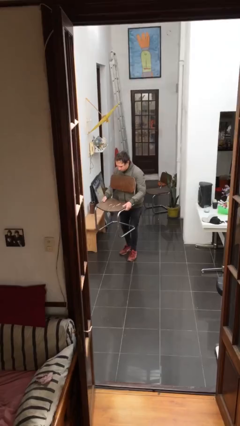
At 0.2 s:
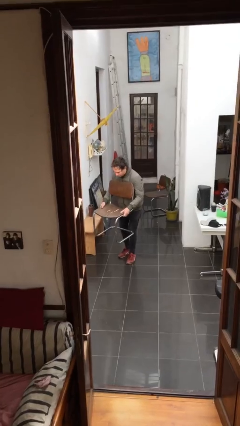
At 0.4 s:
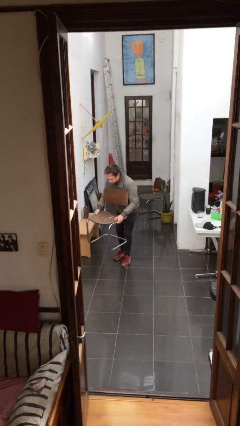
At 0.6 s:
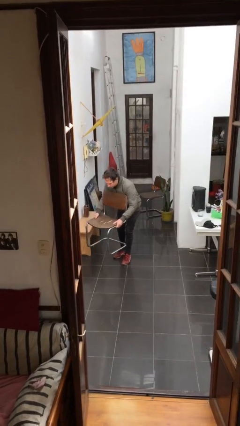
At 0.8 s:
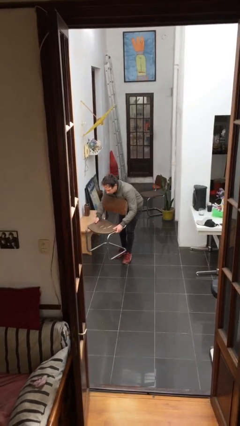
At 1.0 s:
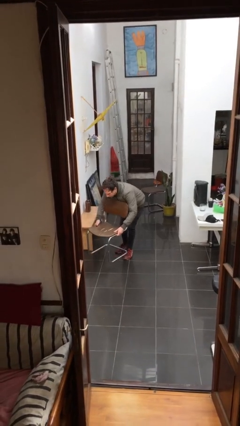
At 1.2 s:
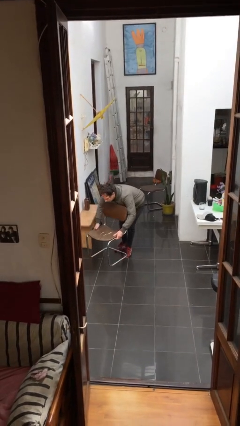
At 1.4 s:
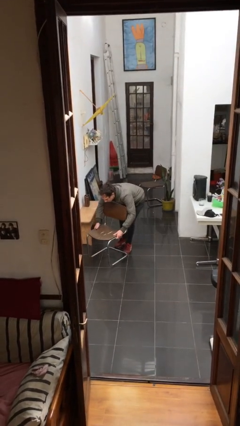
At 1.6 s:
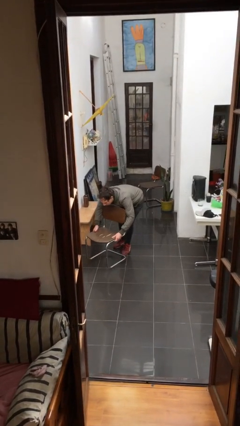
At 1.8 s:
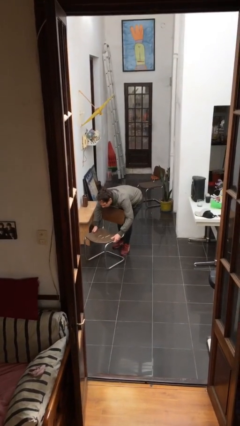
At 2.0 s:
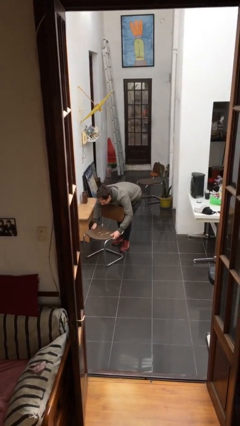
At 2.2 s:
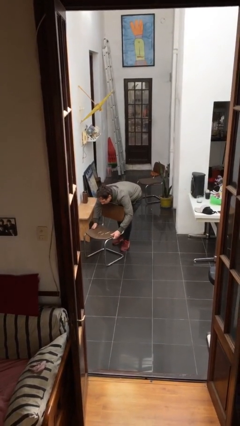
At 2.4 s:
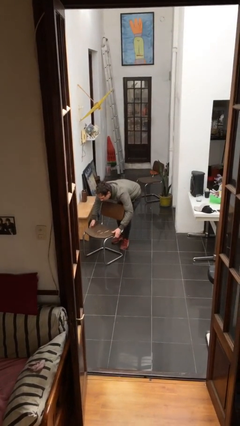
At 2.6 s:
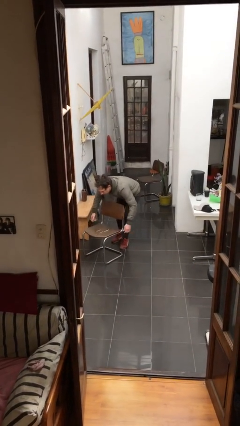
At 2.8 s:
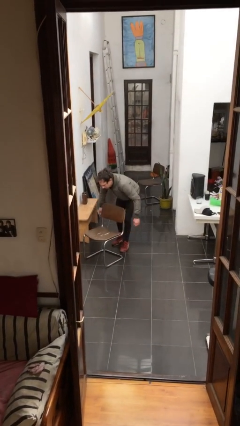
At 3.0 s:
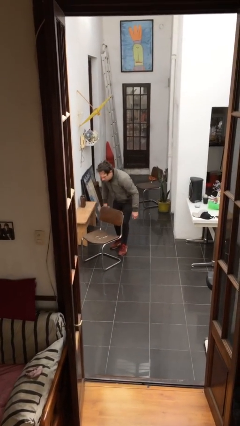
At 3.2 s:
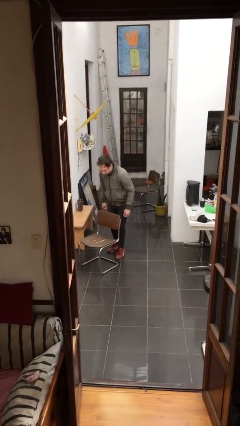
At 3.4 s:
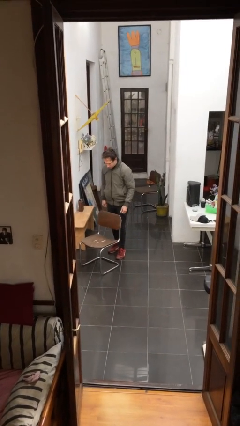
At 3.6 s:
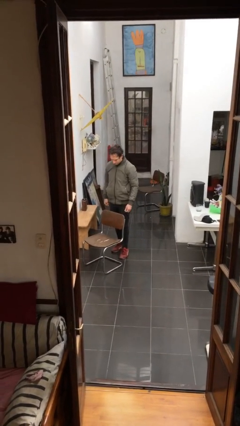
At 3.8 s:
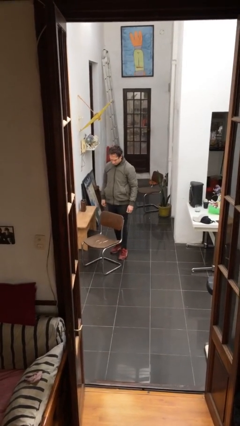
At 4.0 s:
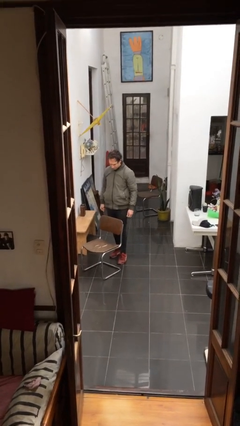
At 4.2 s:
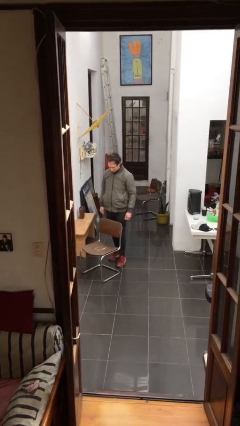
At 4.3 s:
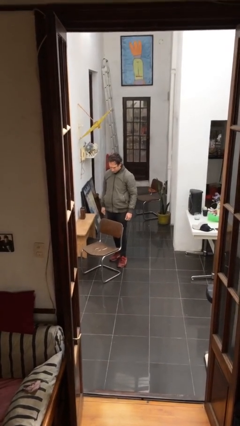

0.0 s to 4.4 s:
person puts down object on floor

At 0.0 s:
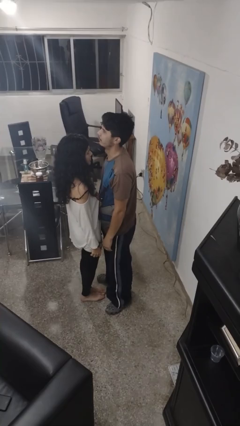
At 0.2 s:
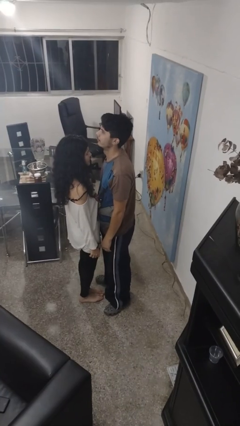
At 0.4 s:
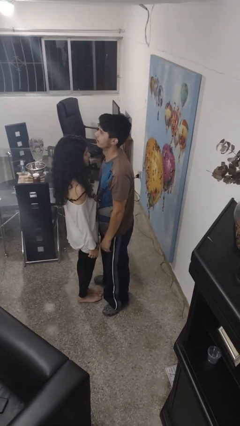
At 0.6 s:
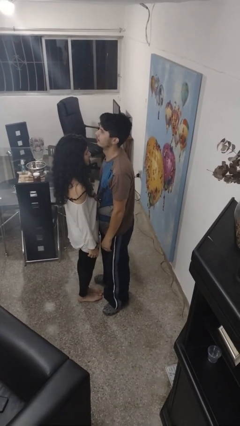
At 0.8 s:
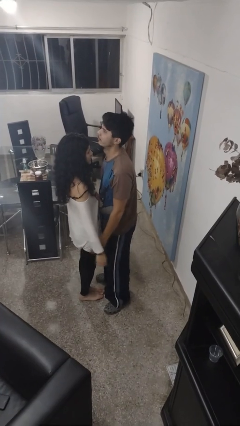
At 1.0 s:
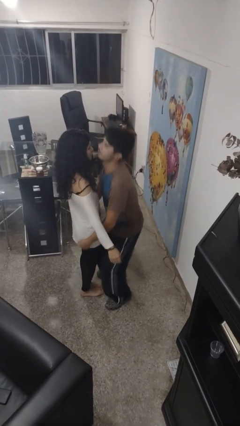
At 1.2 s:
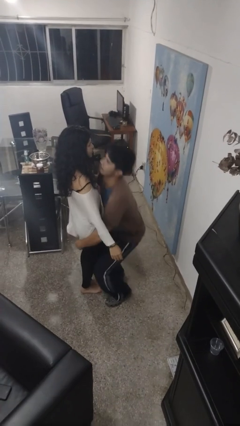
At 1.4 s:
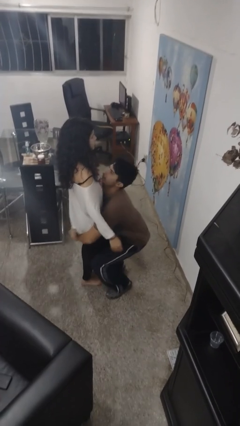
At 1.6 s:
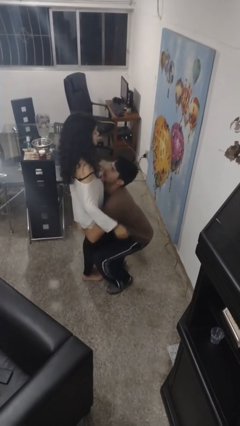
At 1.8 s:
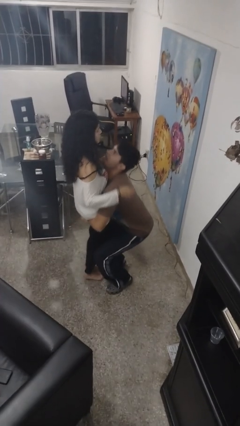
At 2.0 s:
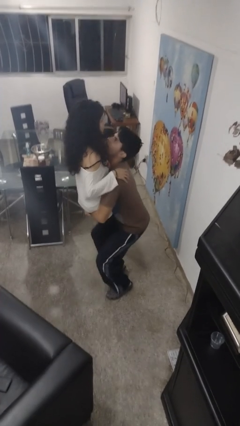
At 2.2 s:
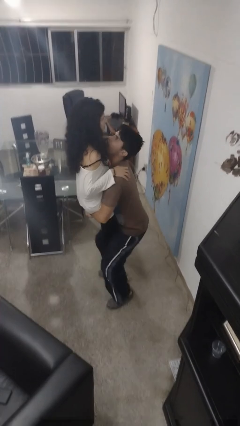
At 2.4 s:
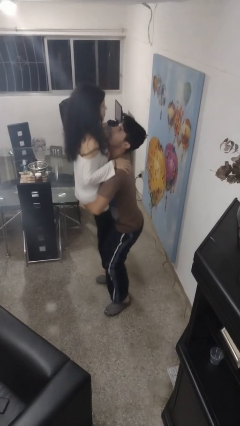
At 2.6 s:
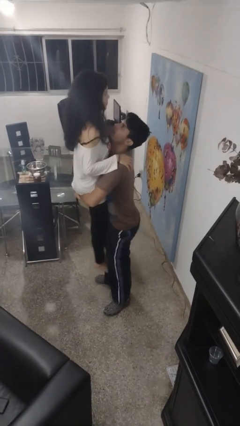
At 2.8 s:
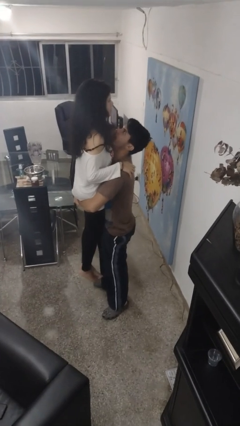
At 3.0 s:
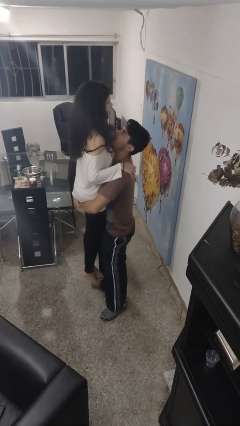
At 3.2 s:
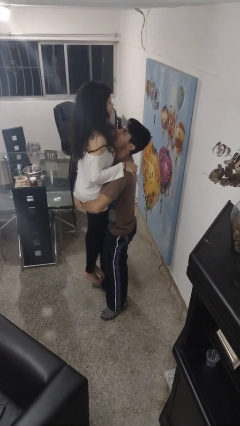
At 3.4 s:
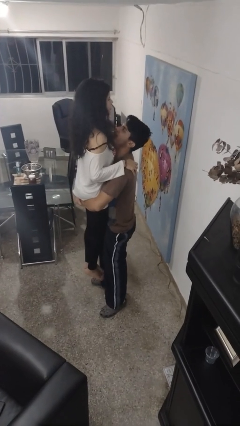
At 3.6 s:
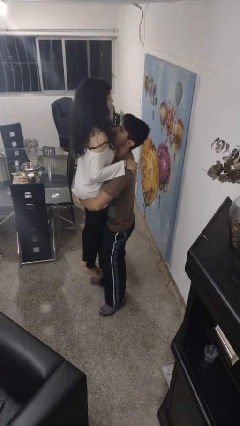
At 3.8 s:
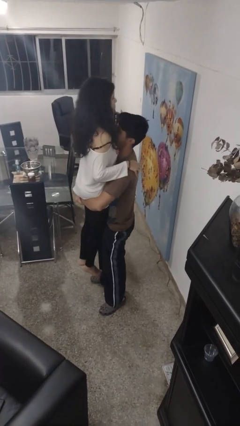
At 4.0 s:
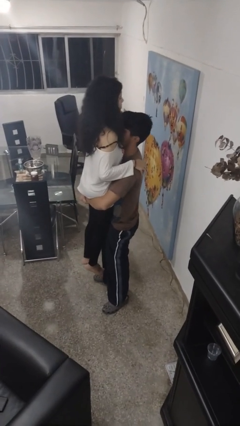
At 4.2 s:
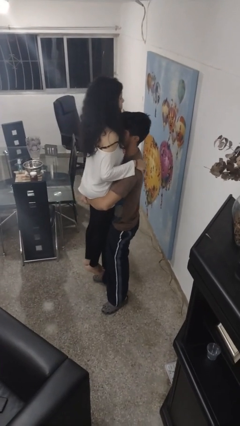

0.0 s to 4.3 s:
person picks up person

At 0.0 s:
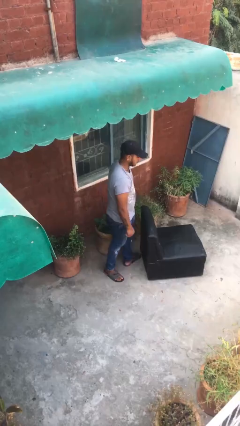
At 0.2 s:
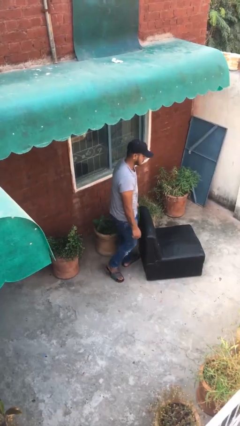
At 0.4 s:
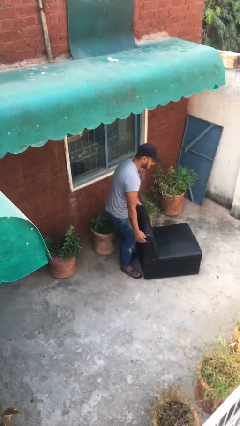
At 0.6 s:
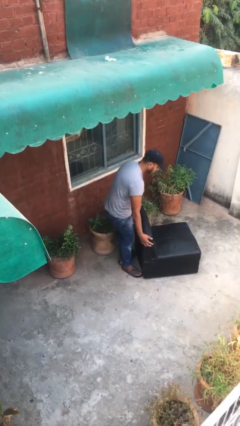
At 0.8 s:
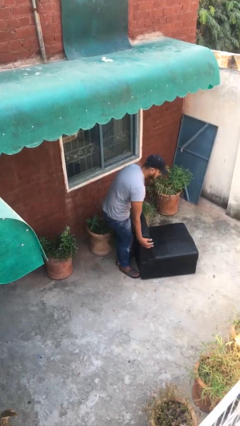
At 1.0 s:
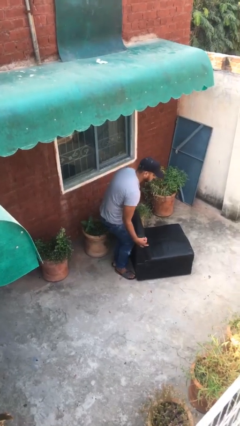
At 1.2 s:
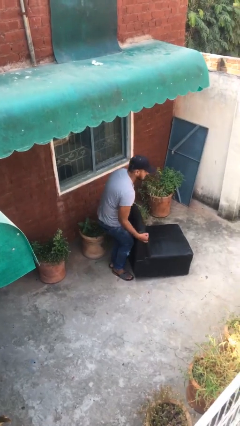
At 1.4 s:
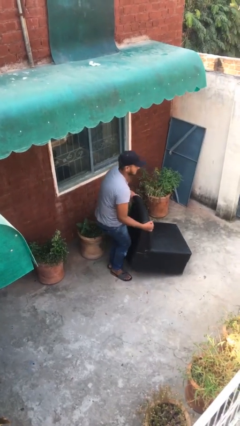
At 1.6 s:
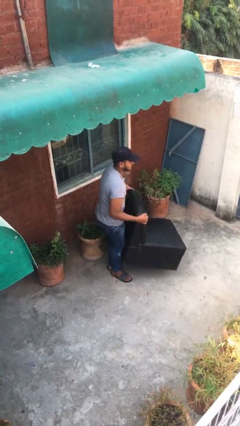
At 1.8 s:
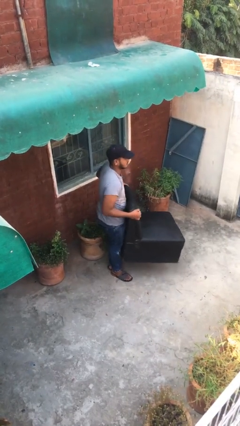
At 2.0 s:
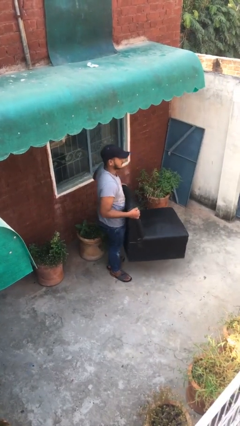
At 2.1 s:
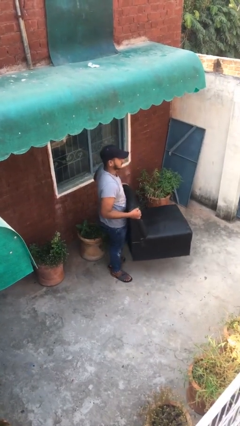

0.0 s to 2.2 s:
person picks up object from floor

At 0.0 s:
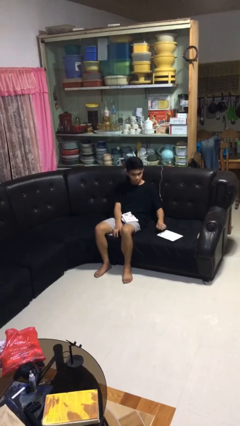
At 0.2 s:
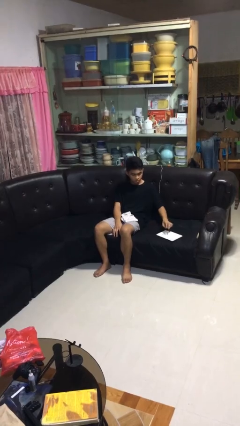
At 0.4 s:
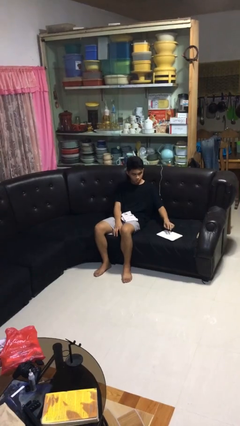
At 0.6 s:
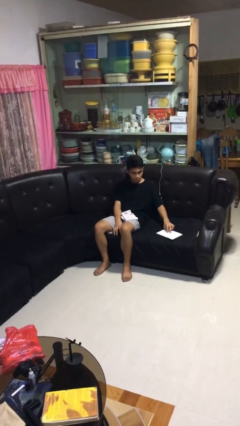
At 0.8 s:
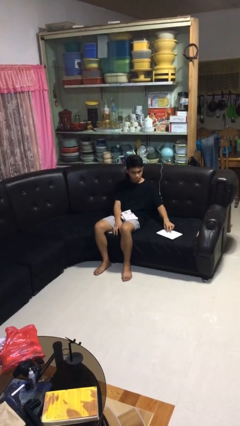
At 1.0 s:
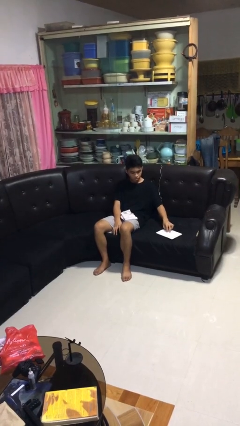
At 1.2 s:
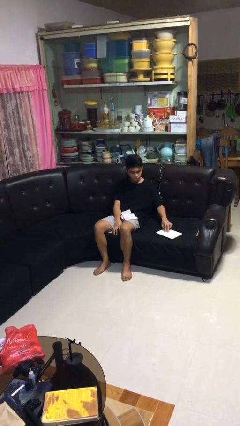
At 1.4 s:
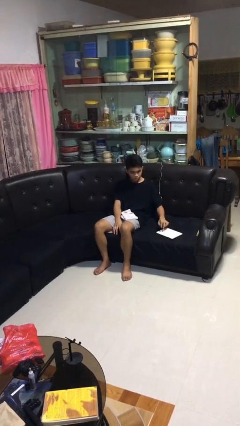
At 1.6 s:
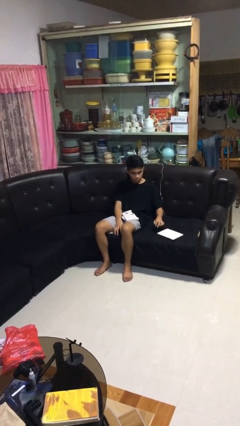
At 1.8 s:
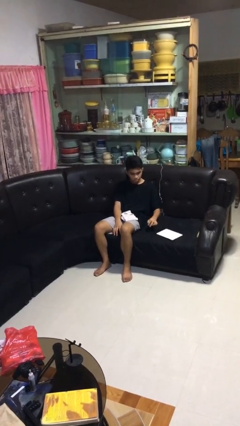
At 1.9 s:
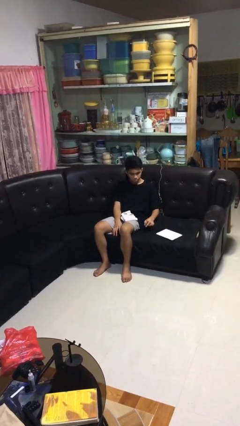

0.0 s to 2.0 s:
person taps object with finger

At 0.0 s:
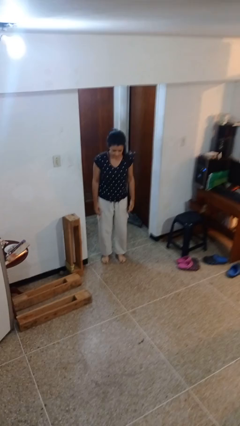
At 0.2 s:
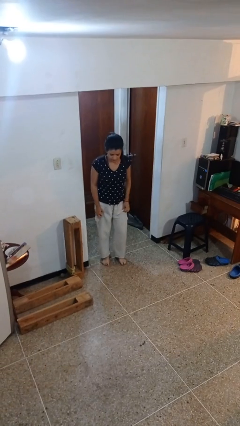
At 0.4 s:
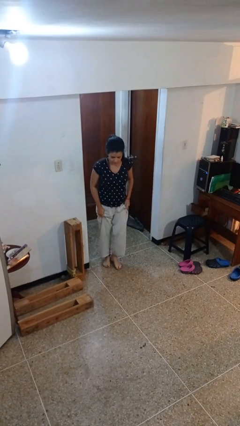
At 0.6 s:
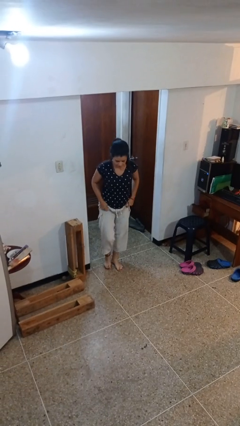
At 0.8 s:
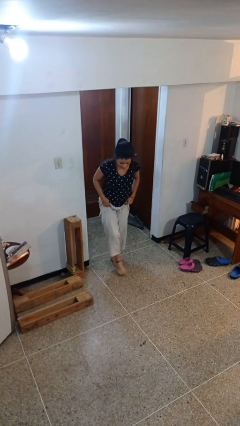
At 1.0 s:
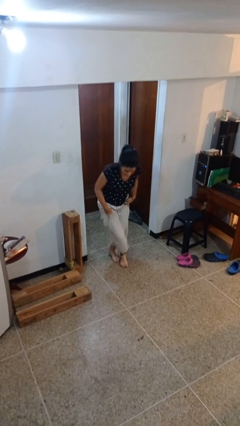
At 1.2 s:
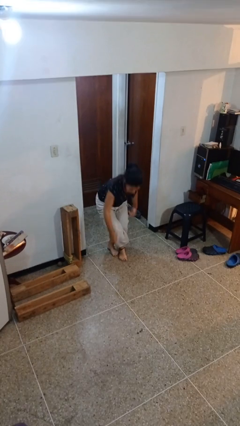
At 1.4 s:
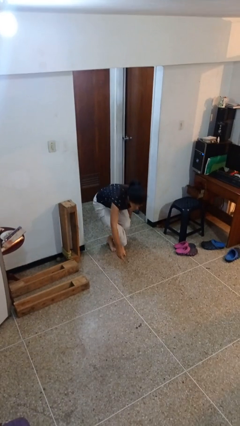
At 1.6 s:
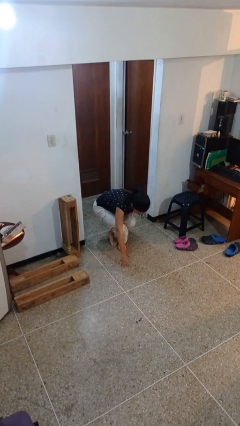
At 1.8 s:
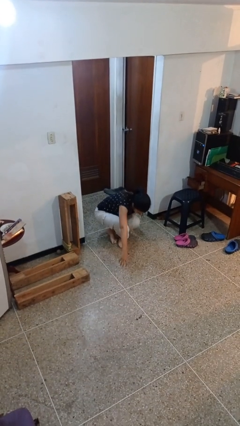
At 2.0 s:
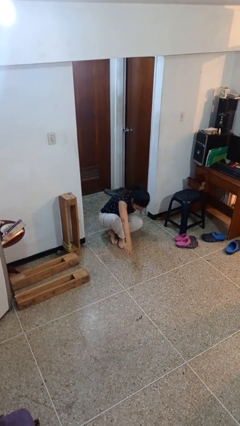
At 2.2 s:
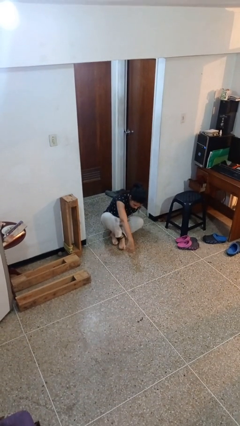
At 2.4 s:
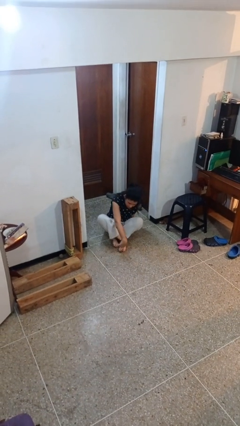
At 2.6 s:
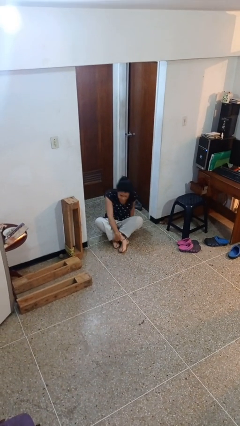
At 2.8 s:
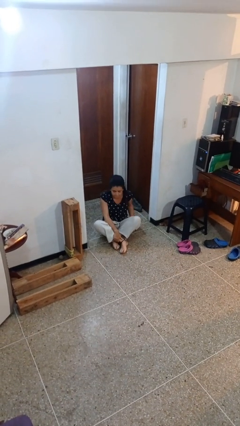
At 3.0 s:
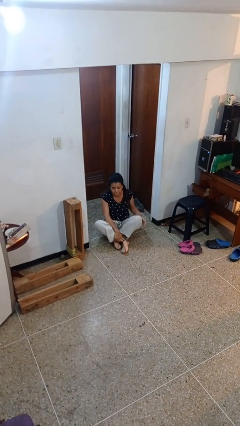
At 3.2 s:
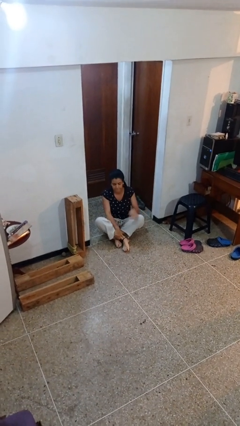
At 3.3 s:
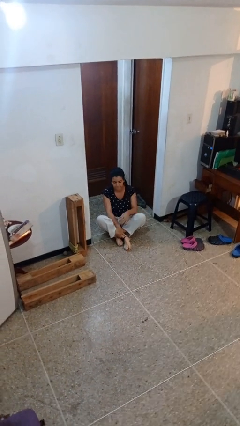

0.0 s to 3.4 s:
person sits crisscross

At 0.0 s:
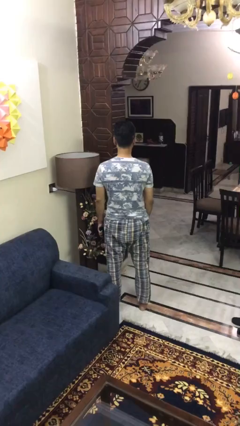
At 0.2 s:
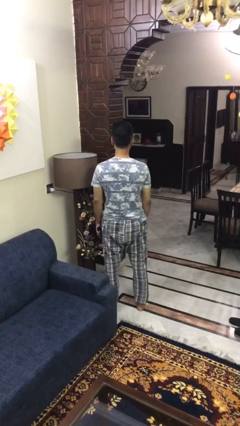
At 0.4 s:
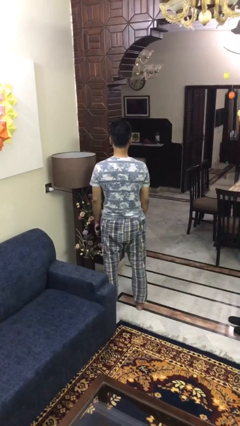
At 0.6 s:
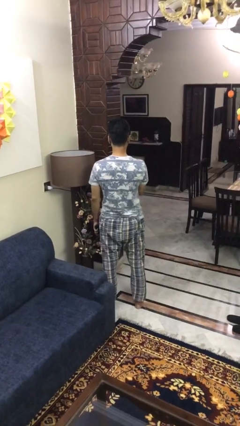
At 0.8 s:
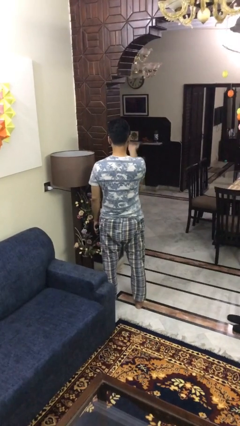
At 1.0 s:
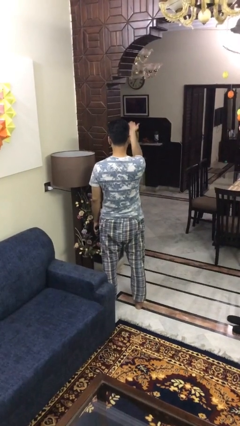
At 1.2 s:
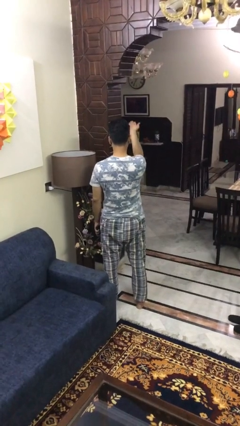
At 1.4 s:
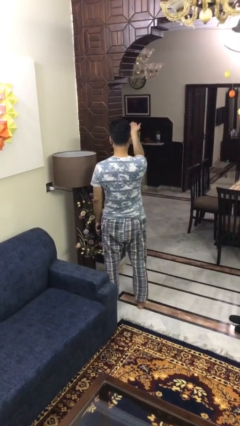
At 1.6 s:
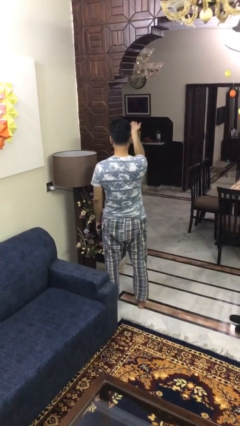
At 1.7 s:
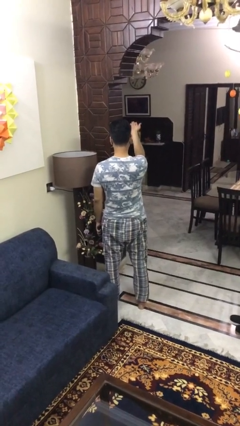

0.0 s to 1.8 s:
person gestures swipe up
